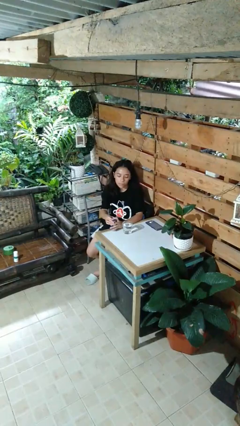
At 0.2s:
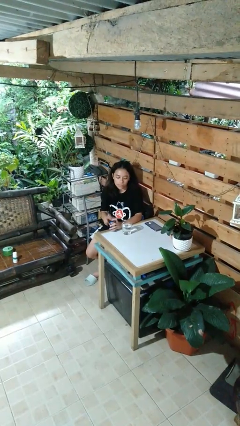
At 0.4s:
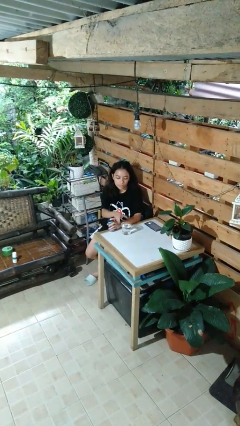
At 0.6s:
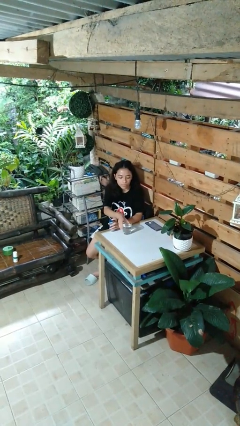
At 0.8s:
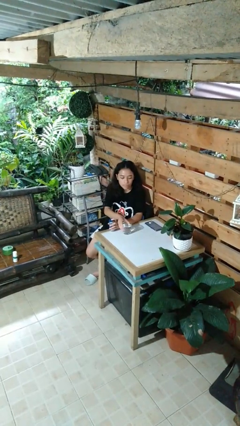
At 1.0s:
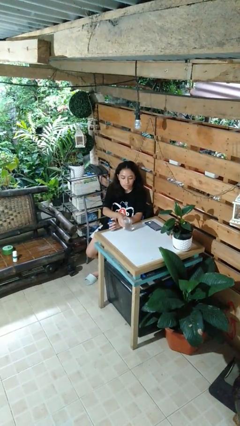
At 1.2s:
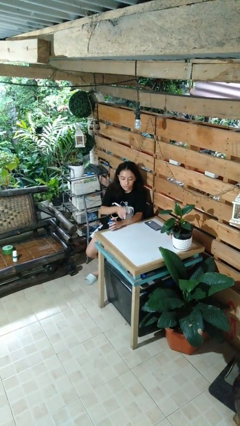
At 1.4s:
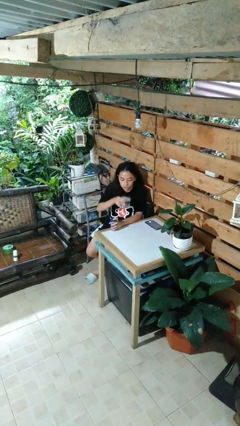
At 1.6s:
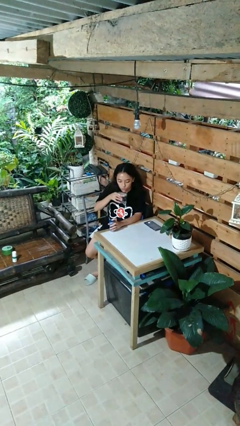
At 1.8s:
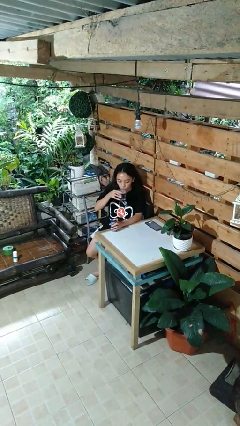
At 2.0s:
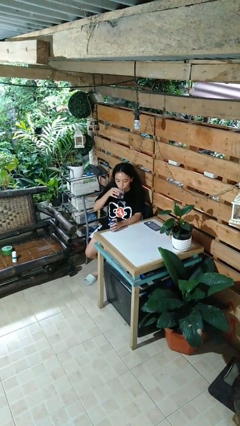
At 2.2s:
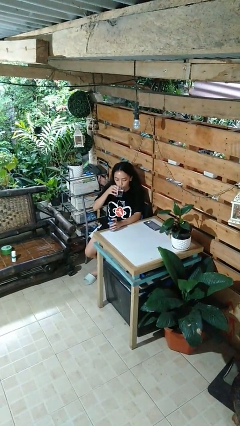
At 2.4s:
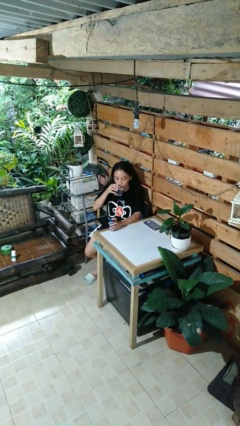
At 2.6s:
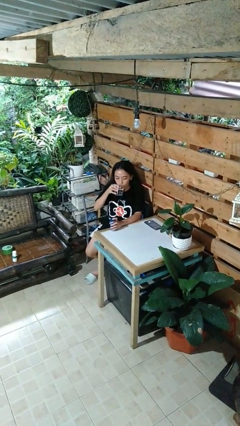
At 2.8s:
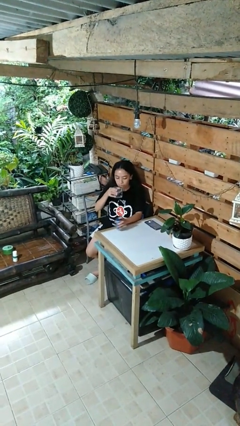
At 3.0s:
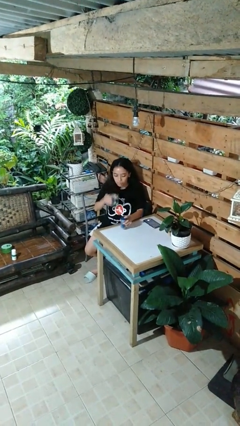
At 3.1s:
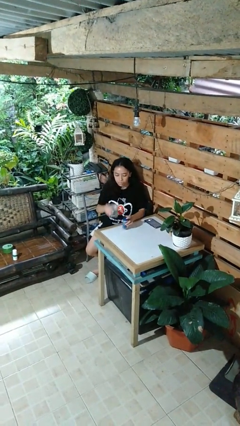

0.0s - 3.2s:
person drinks from cup

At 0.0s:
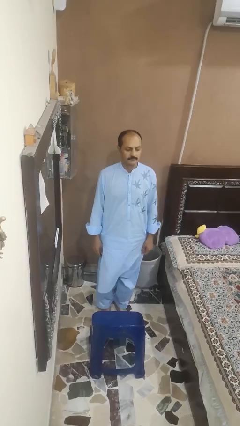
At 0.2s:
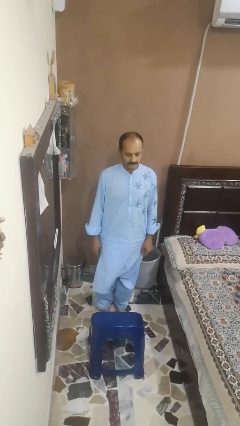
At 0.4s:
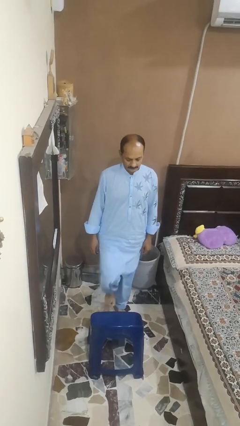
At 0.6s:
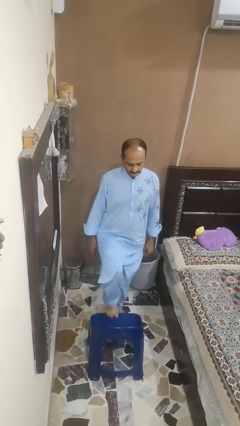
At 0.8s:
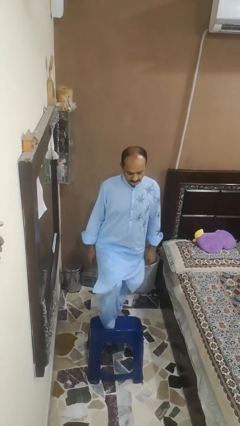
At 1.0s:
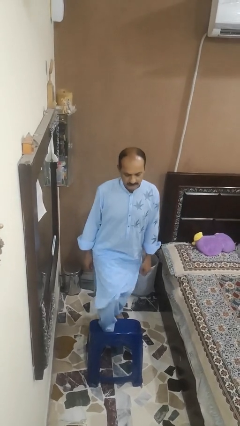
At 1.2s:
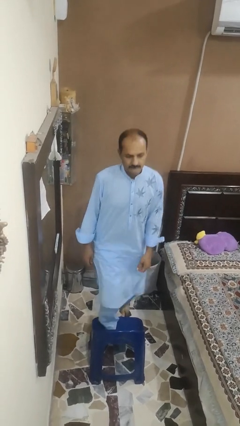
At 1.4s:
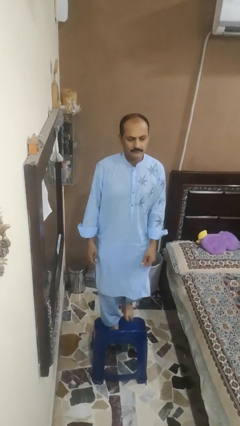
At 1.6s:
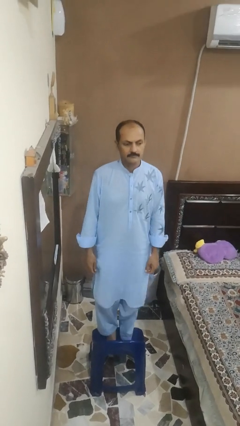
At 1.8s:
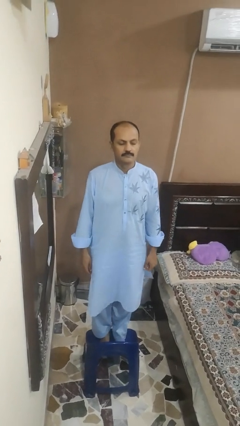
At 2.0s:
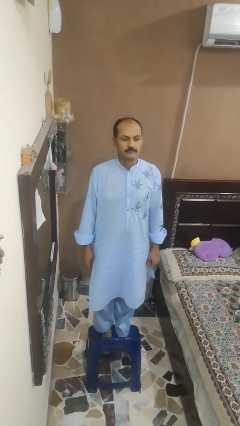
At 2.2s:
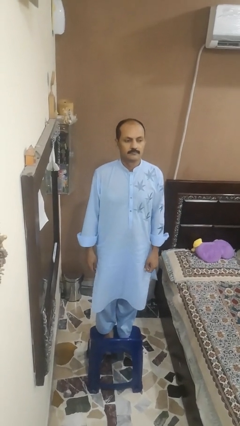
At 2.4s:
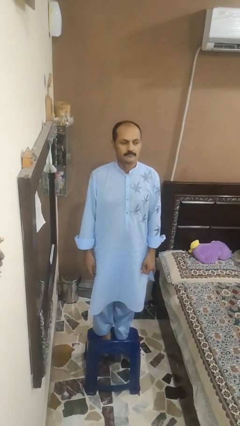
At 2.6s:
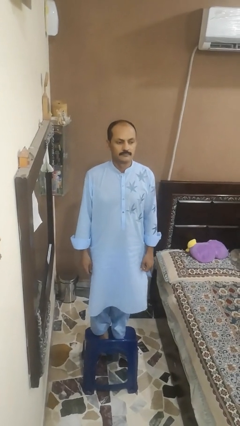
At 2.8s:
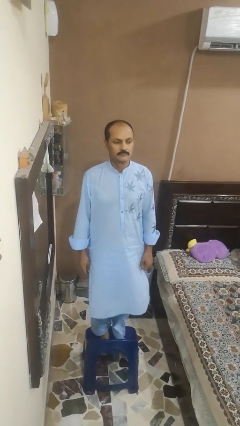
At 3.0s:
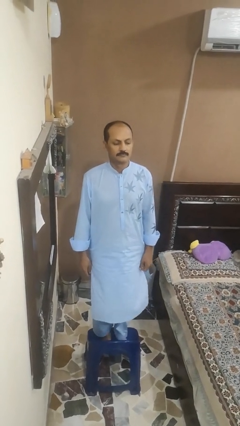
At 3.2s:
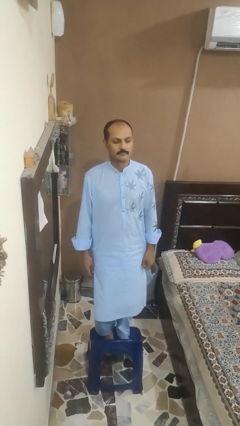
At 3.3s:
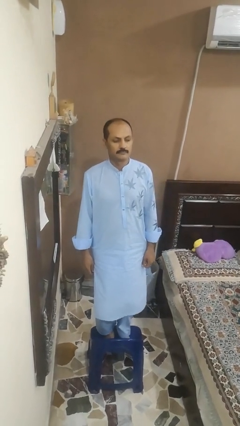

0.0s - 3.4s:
person climbs on chair

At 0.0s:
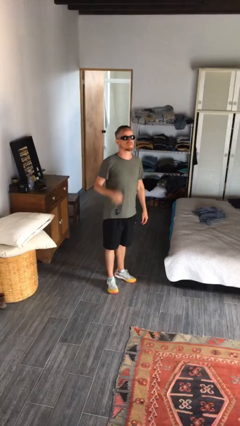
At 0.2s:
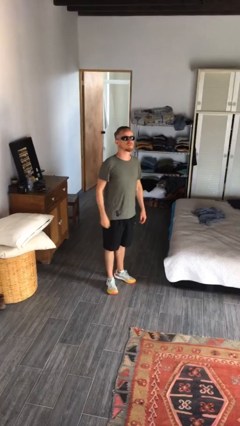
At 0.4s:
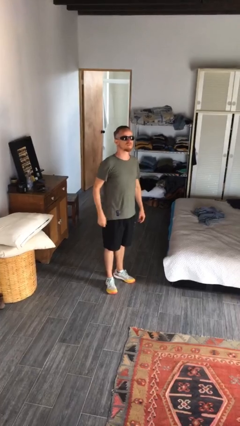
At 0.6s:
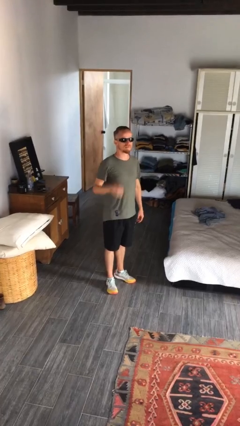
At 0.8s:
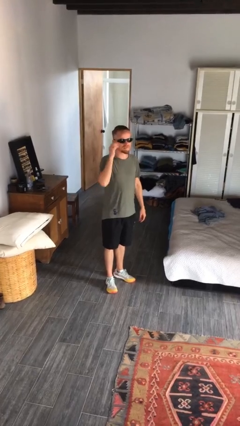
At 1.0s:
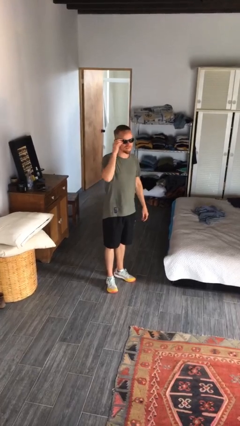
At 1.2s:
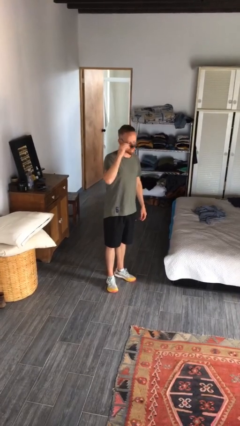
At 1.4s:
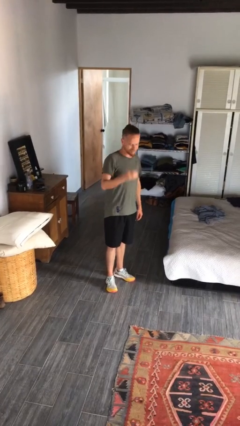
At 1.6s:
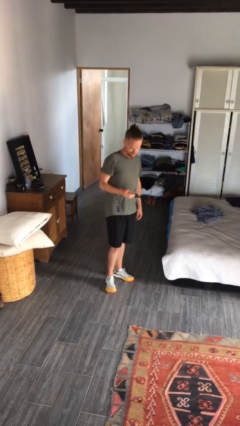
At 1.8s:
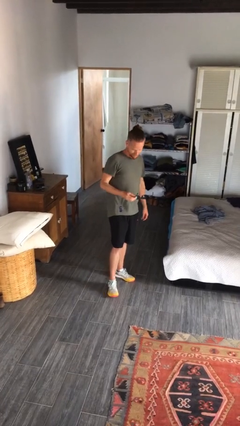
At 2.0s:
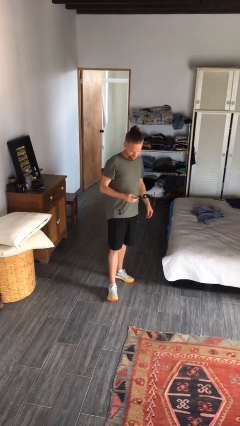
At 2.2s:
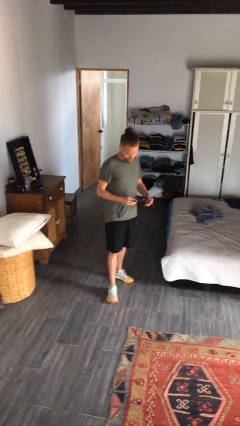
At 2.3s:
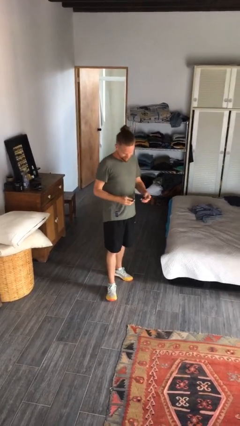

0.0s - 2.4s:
person takes off sunglasses

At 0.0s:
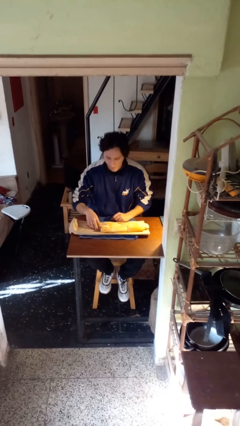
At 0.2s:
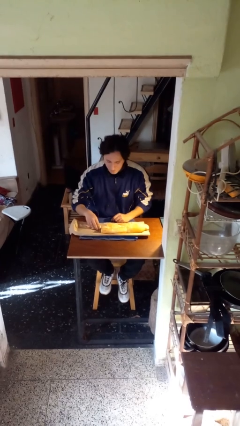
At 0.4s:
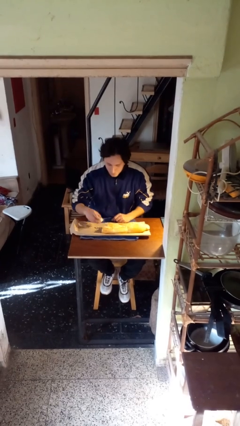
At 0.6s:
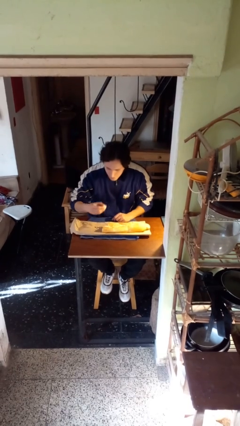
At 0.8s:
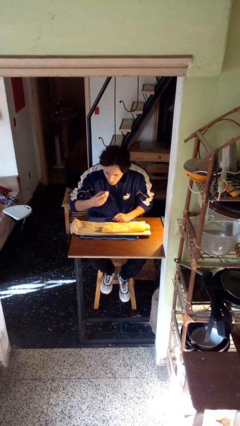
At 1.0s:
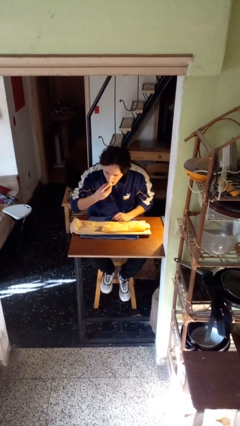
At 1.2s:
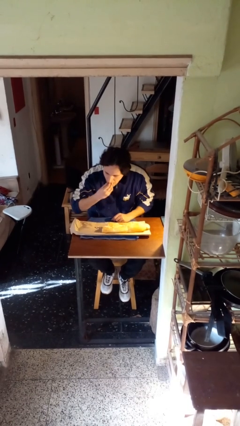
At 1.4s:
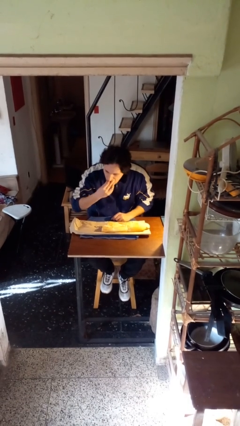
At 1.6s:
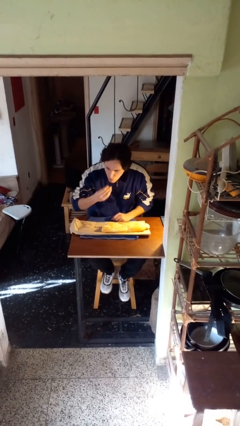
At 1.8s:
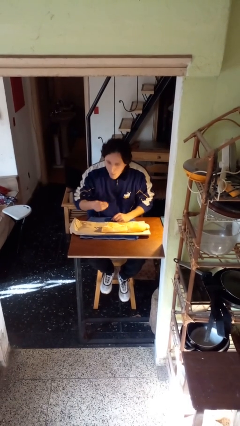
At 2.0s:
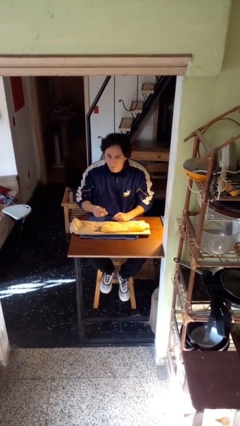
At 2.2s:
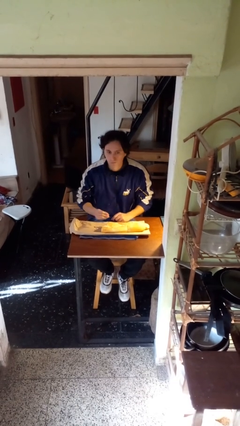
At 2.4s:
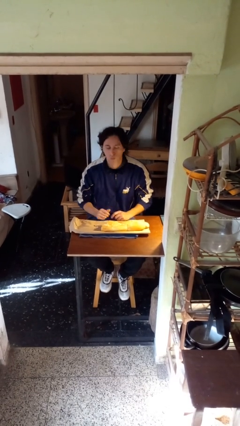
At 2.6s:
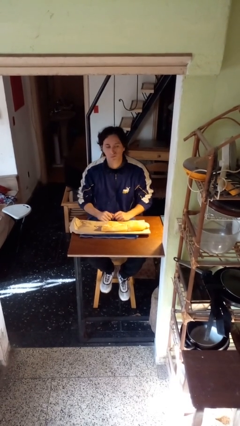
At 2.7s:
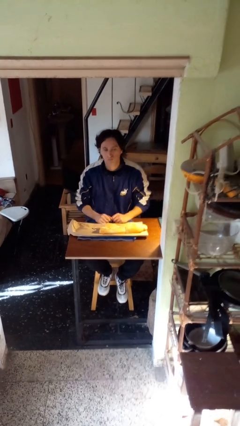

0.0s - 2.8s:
person eats with hands

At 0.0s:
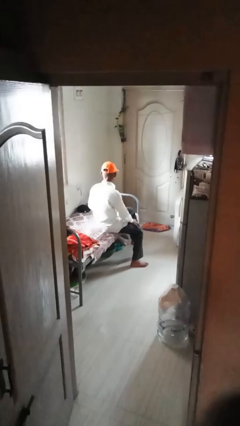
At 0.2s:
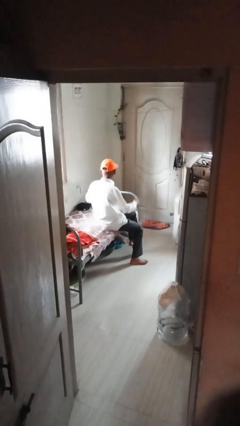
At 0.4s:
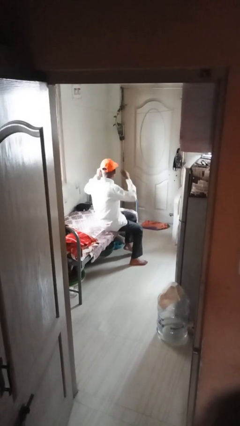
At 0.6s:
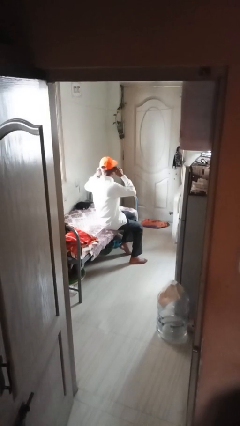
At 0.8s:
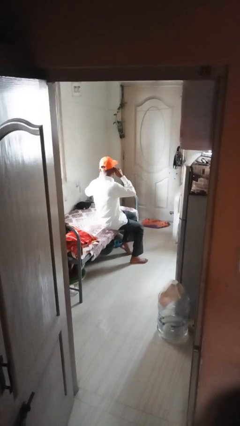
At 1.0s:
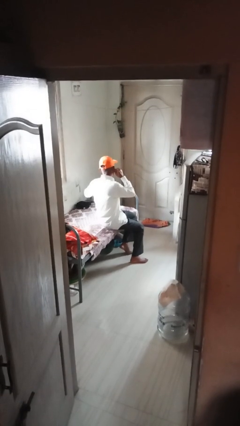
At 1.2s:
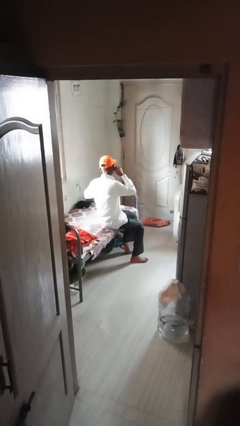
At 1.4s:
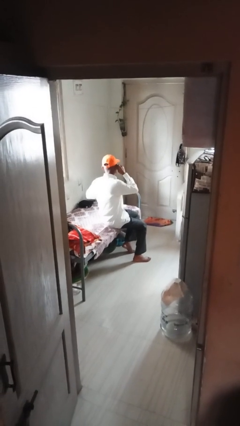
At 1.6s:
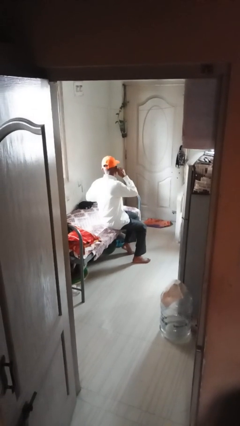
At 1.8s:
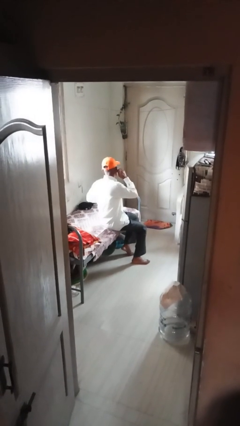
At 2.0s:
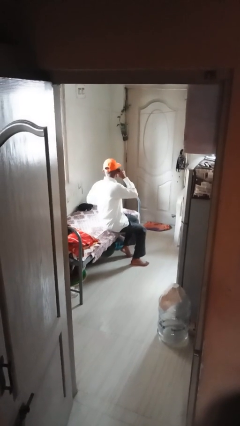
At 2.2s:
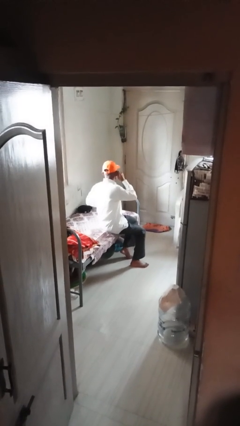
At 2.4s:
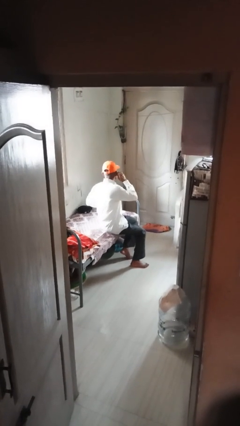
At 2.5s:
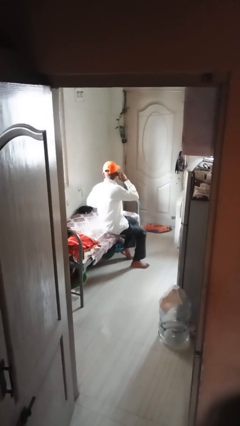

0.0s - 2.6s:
person touches earlobe

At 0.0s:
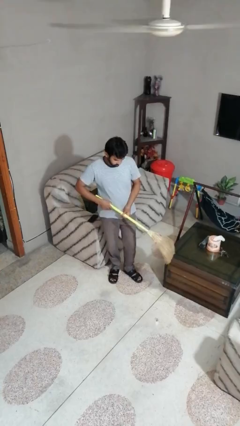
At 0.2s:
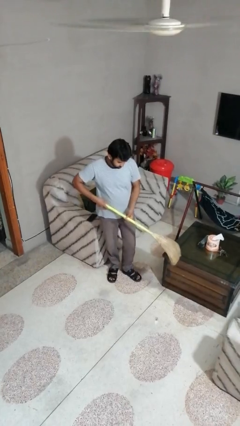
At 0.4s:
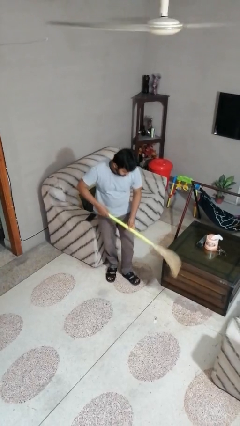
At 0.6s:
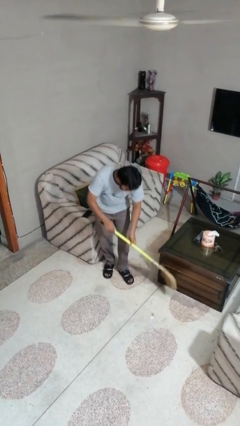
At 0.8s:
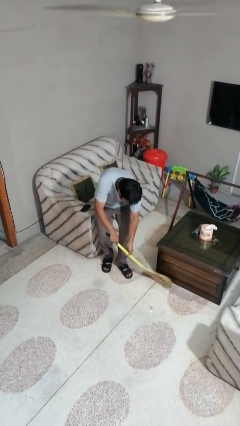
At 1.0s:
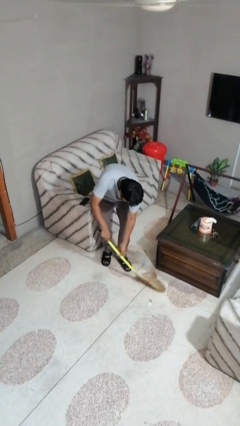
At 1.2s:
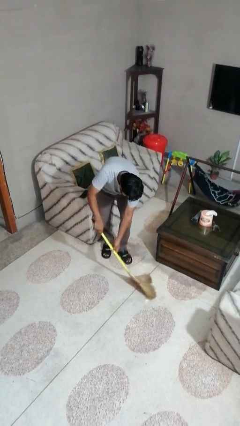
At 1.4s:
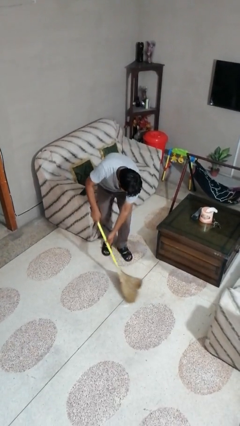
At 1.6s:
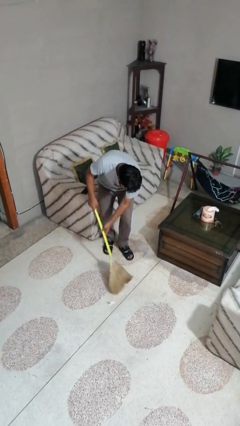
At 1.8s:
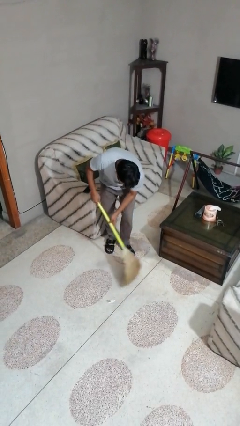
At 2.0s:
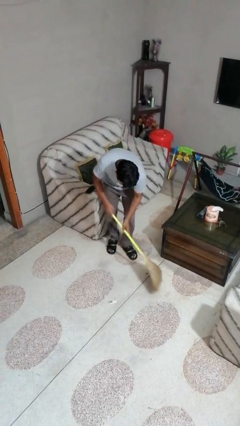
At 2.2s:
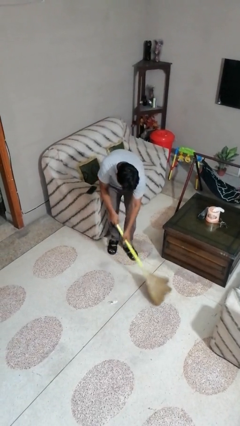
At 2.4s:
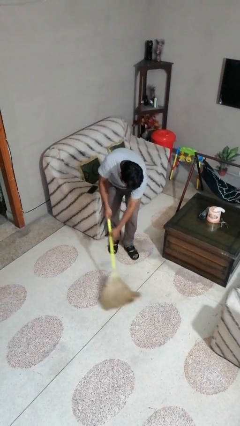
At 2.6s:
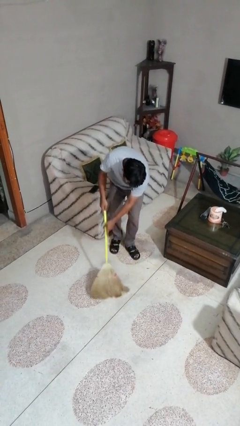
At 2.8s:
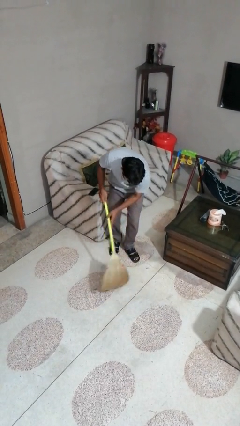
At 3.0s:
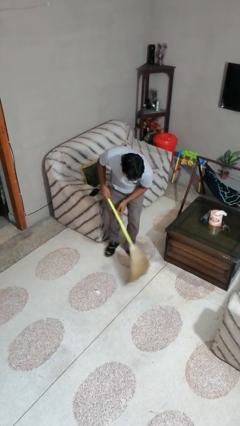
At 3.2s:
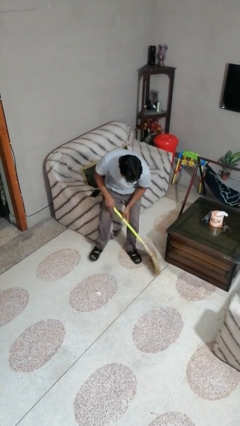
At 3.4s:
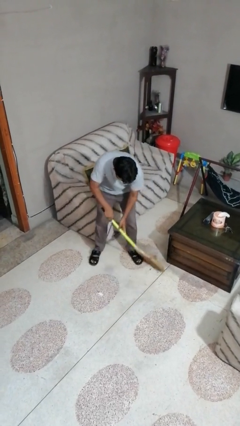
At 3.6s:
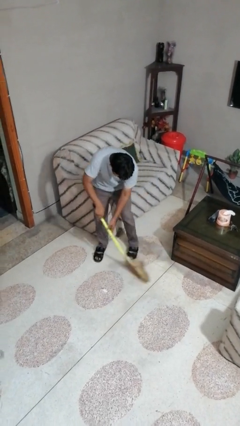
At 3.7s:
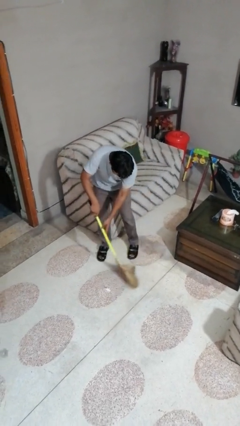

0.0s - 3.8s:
person sweeps floor
